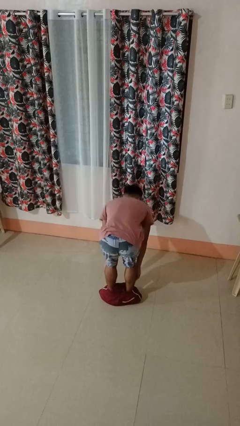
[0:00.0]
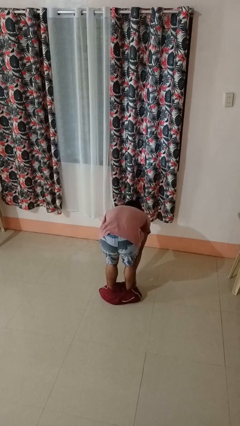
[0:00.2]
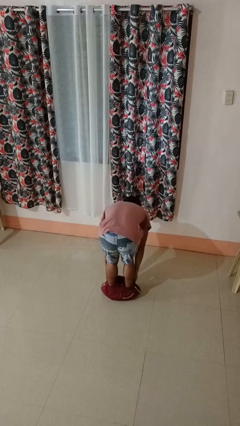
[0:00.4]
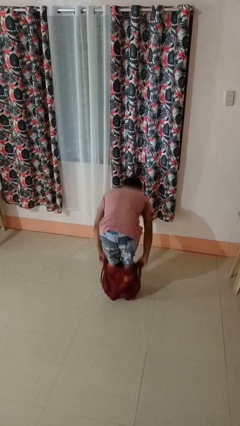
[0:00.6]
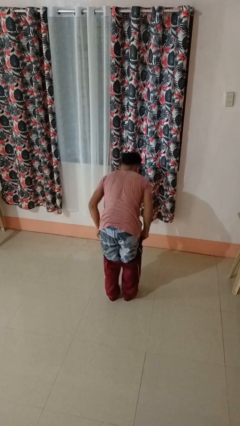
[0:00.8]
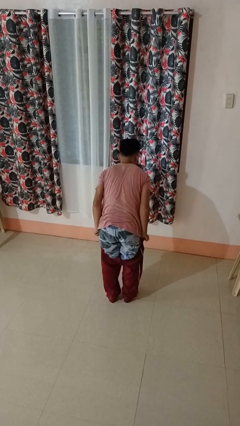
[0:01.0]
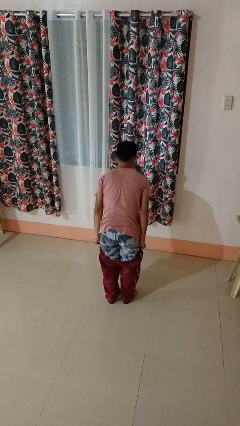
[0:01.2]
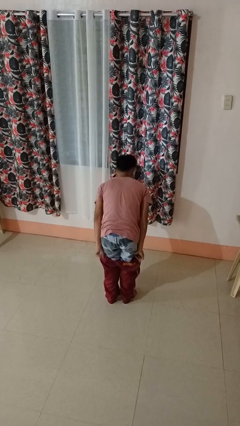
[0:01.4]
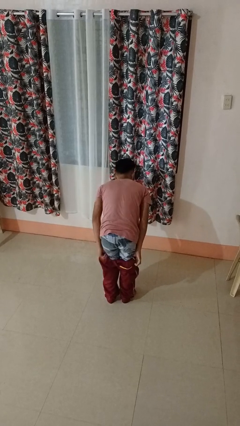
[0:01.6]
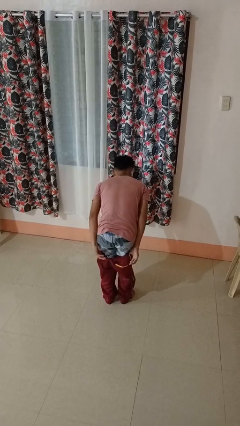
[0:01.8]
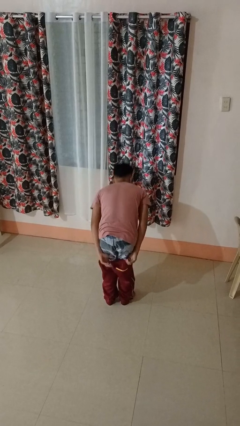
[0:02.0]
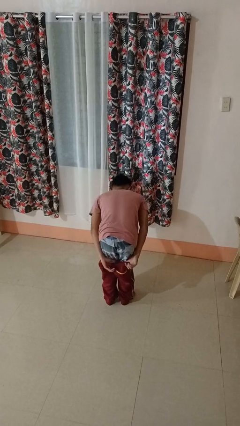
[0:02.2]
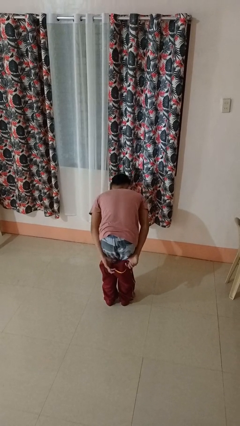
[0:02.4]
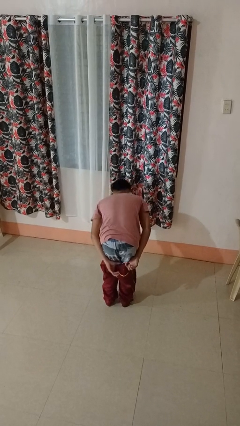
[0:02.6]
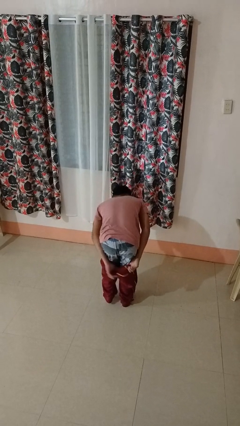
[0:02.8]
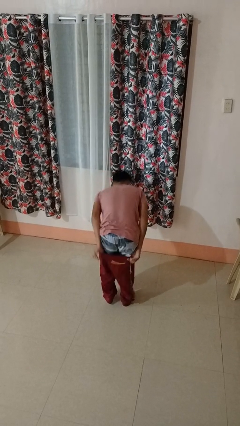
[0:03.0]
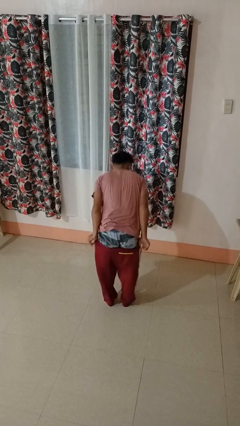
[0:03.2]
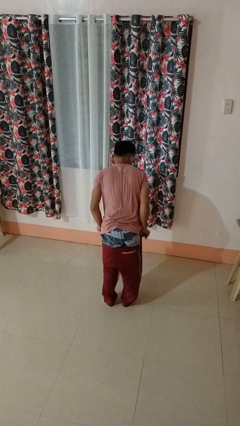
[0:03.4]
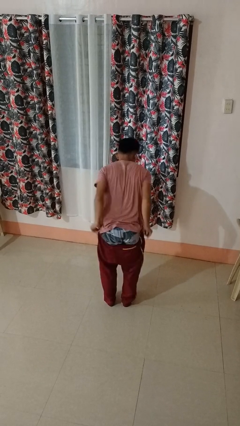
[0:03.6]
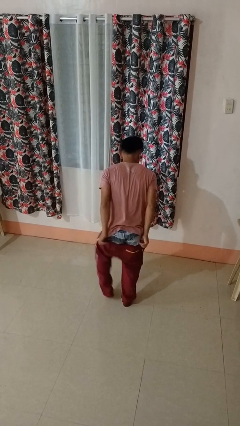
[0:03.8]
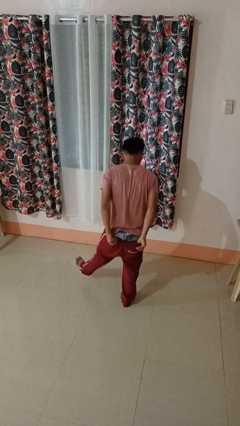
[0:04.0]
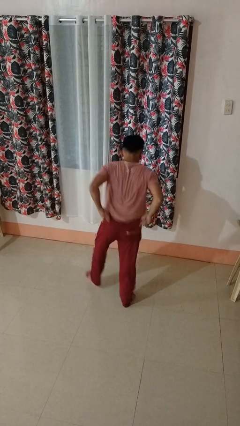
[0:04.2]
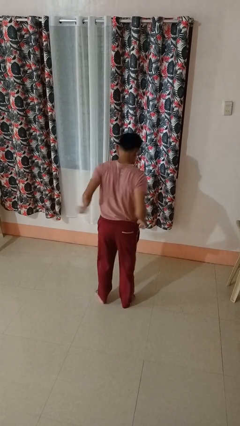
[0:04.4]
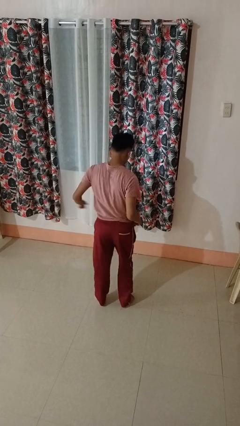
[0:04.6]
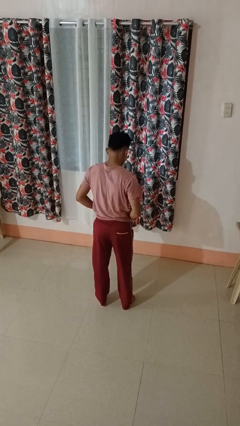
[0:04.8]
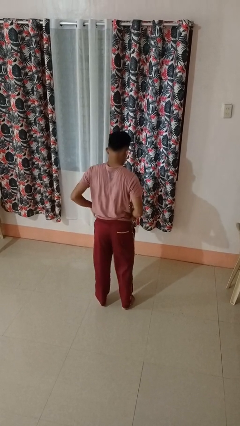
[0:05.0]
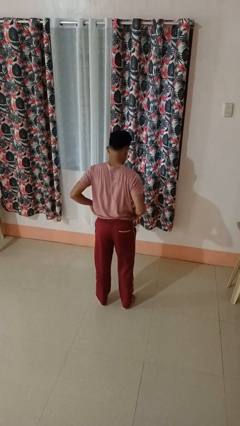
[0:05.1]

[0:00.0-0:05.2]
person puts on pants

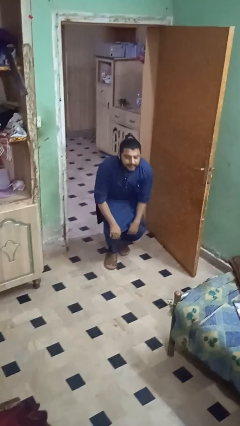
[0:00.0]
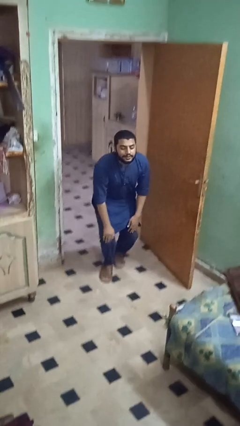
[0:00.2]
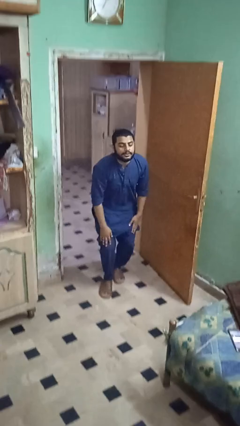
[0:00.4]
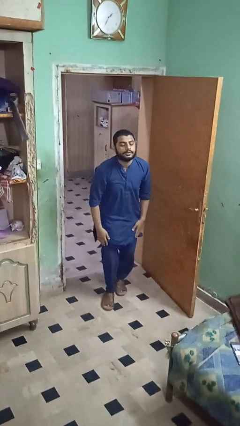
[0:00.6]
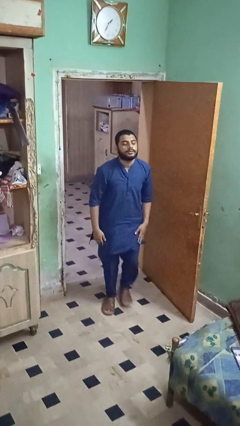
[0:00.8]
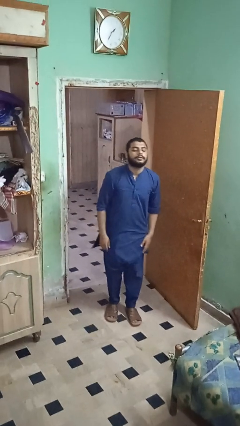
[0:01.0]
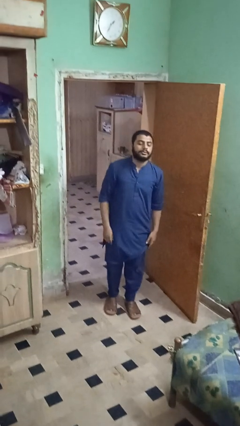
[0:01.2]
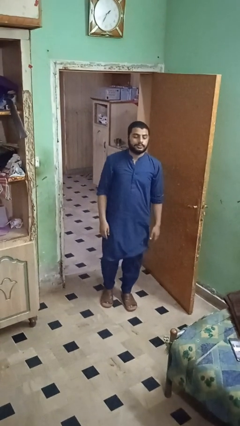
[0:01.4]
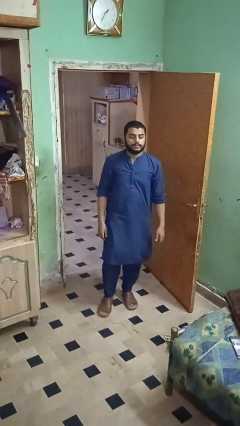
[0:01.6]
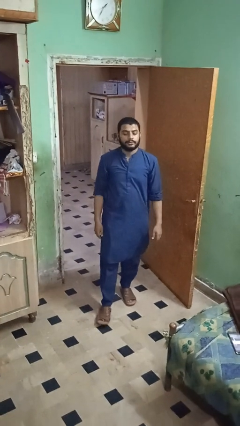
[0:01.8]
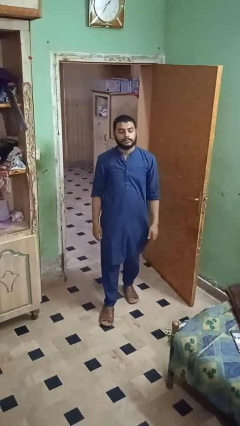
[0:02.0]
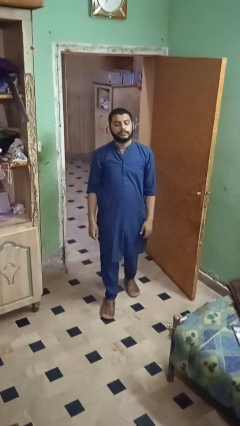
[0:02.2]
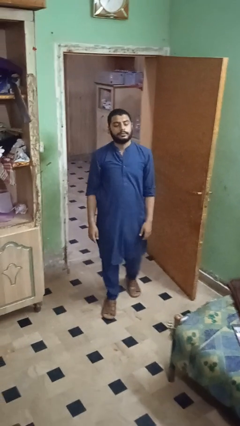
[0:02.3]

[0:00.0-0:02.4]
person stands up from floor

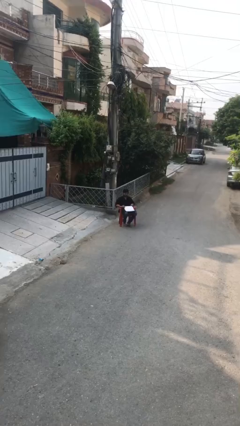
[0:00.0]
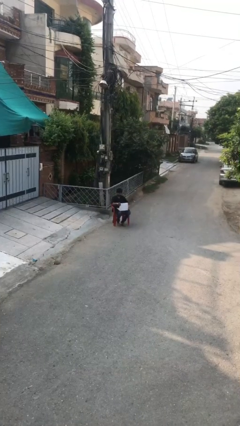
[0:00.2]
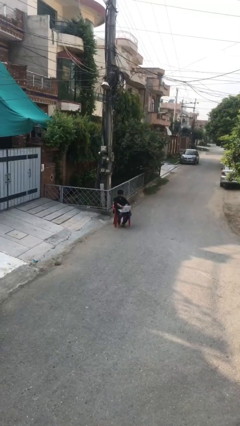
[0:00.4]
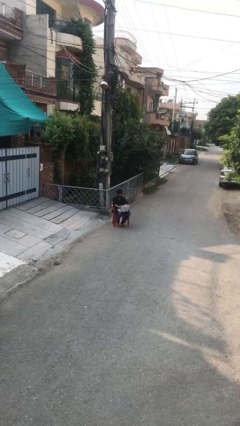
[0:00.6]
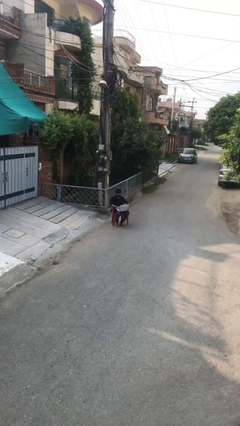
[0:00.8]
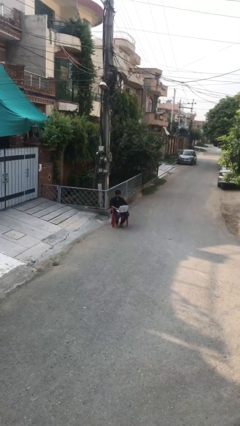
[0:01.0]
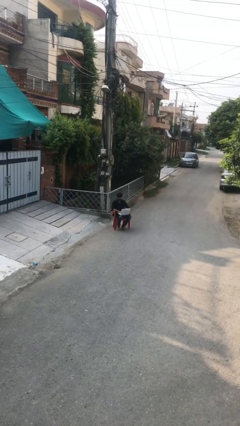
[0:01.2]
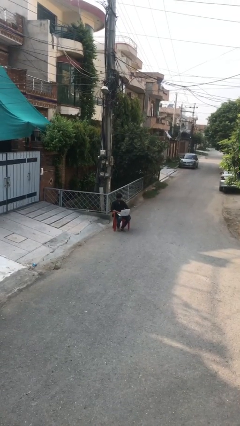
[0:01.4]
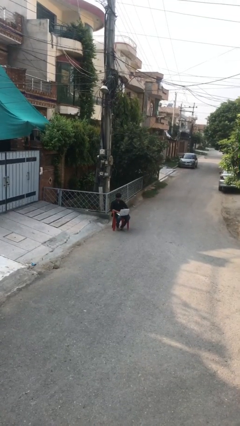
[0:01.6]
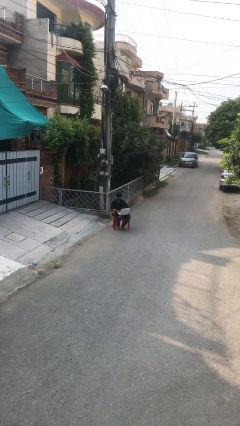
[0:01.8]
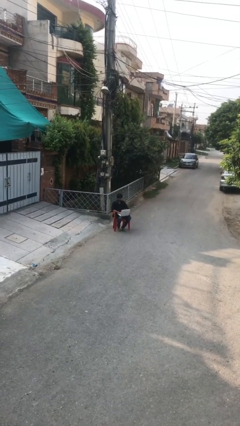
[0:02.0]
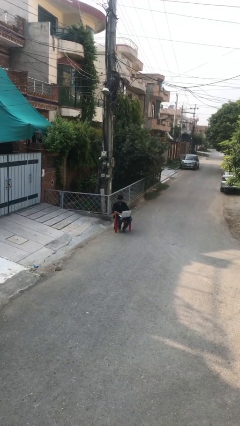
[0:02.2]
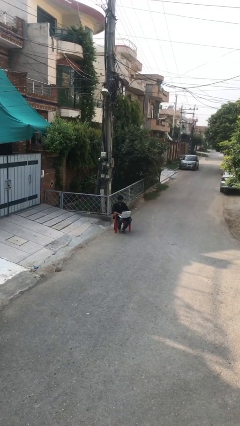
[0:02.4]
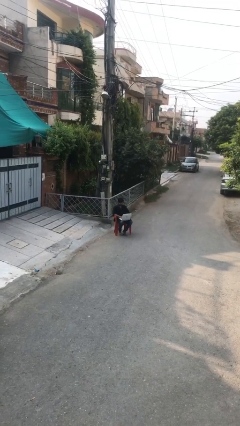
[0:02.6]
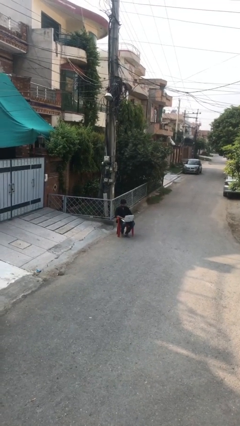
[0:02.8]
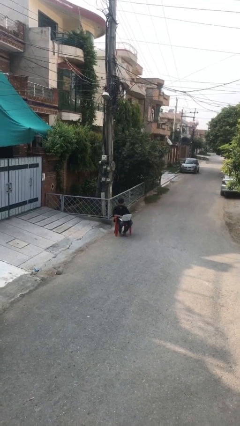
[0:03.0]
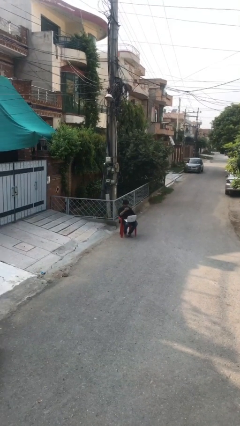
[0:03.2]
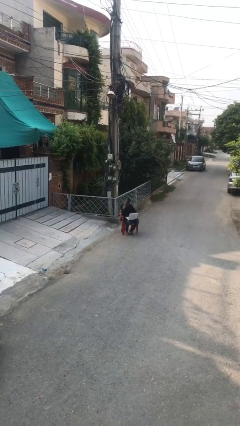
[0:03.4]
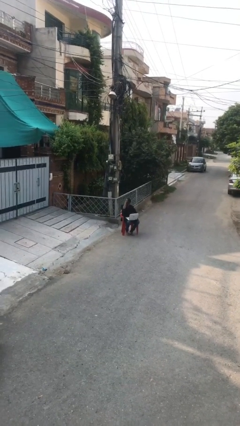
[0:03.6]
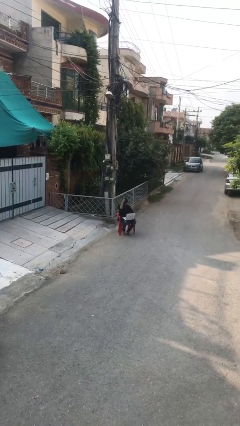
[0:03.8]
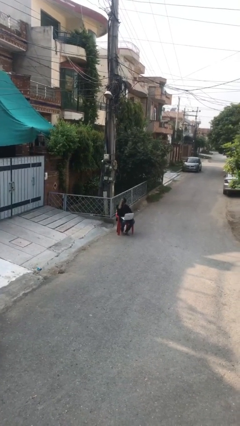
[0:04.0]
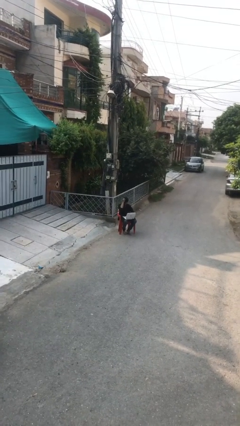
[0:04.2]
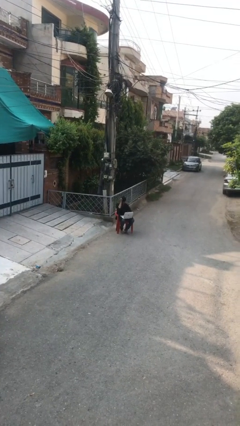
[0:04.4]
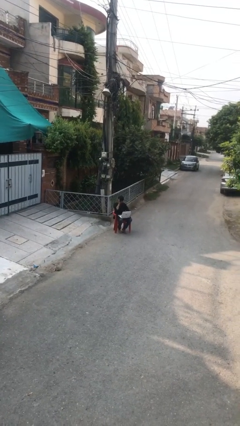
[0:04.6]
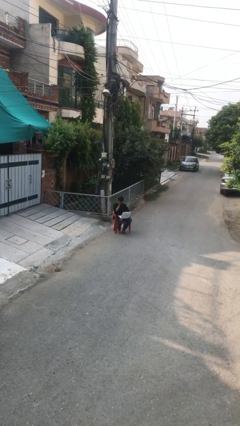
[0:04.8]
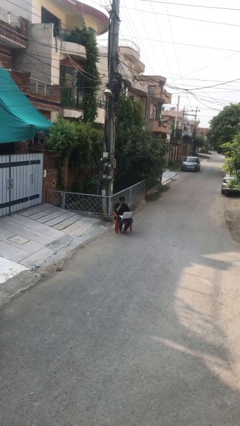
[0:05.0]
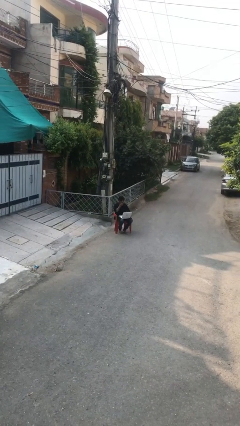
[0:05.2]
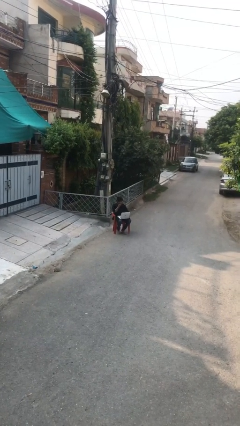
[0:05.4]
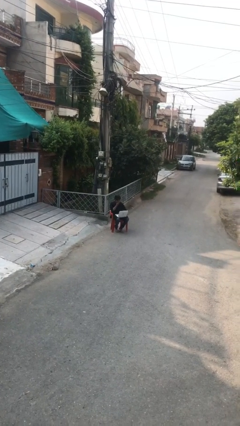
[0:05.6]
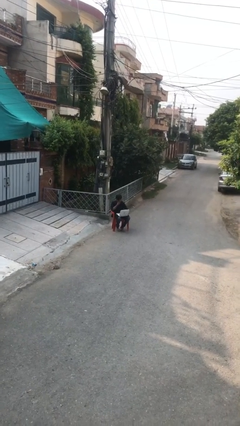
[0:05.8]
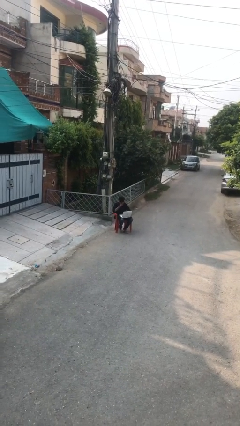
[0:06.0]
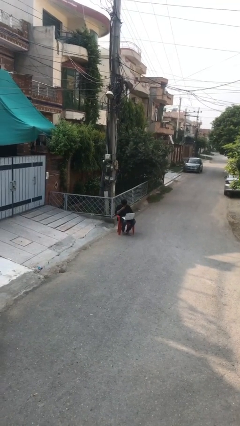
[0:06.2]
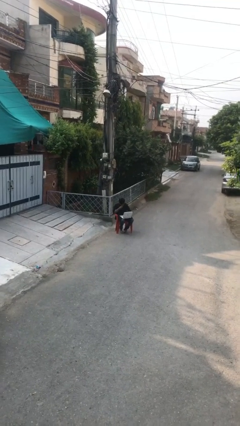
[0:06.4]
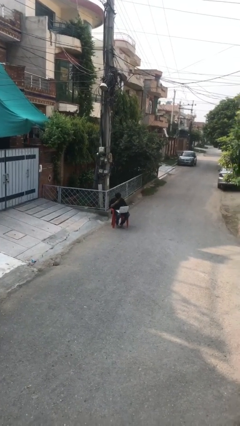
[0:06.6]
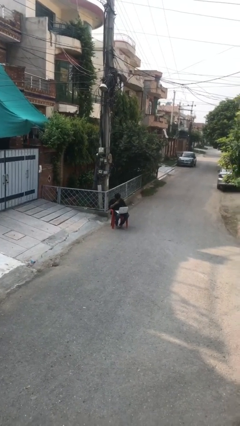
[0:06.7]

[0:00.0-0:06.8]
person interacts with laptop

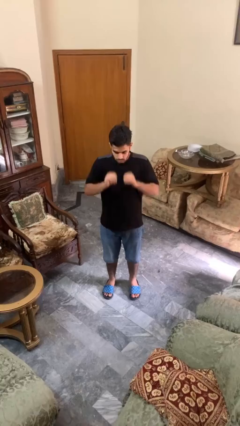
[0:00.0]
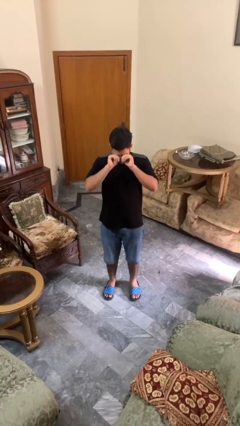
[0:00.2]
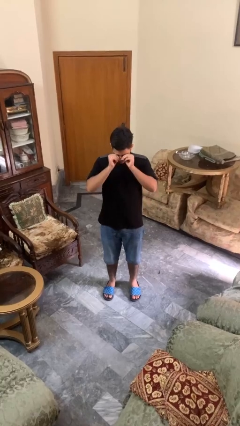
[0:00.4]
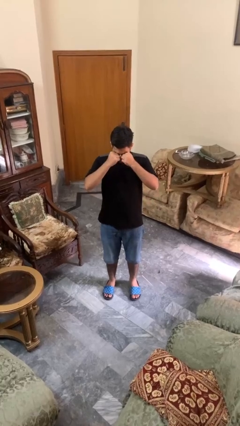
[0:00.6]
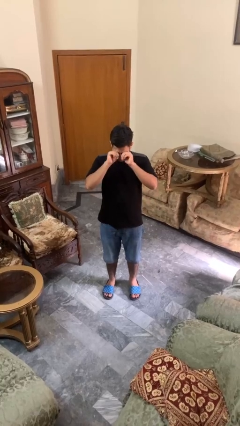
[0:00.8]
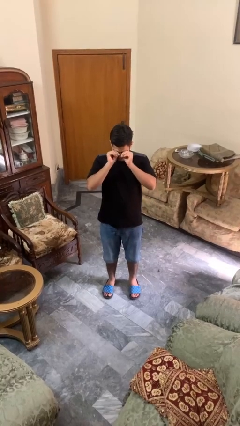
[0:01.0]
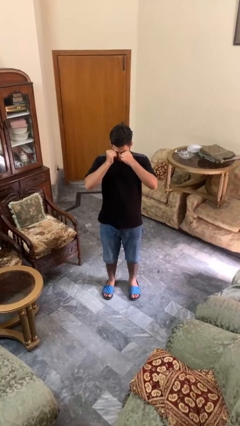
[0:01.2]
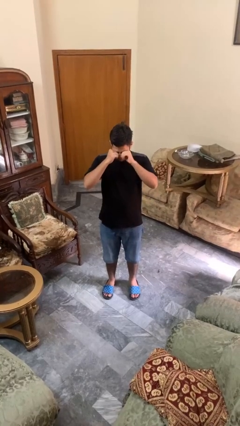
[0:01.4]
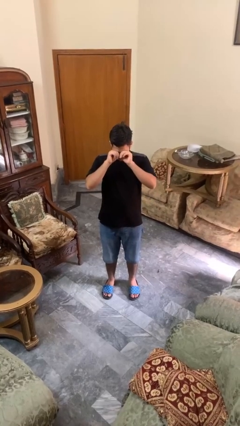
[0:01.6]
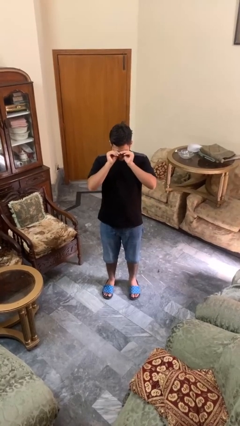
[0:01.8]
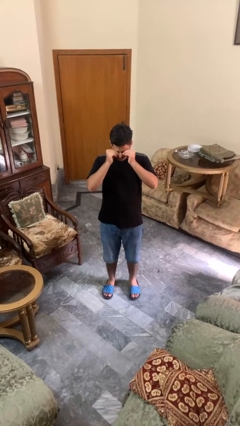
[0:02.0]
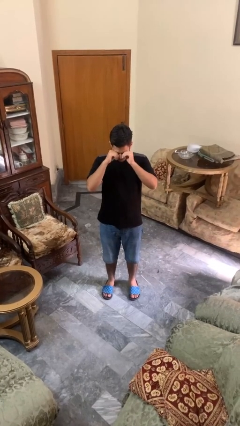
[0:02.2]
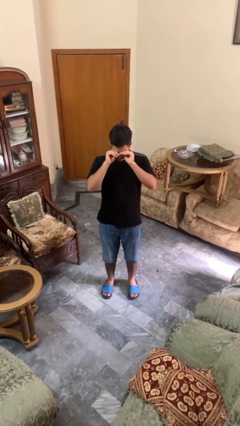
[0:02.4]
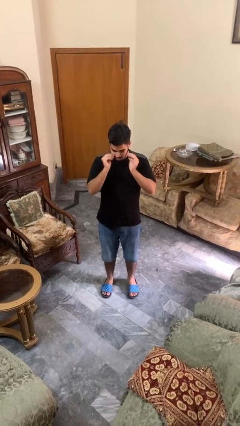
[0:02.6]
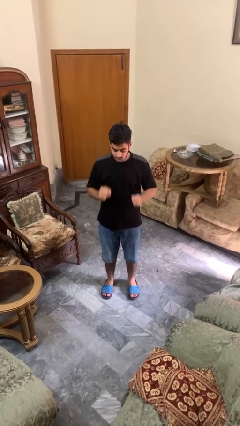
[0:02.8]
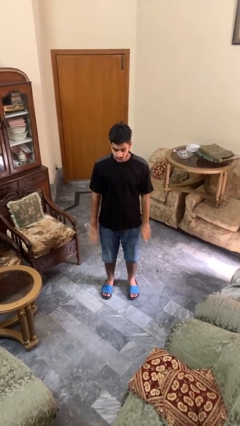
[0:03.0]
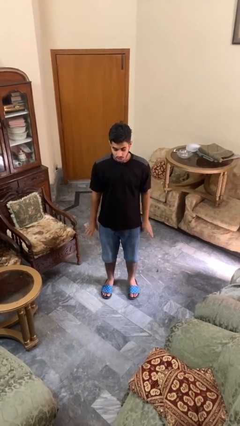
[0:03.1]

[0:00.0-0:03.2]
person rubs eyes

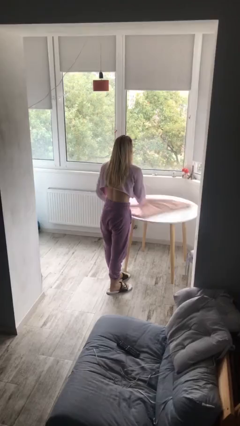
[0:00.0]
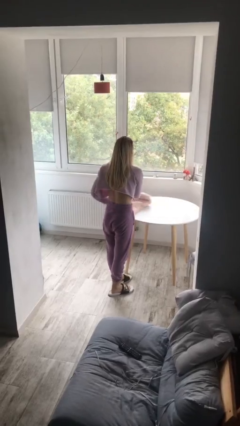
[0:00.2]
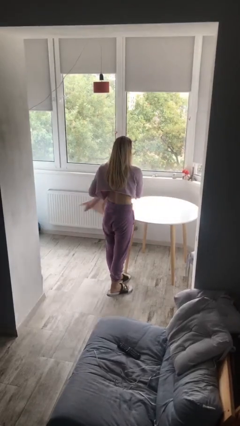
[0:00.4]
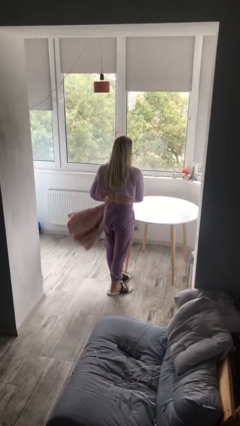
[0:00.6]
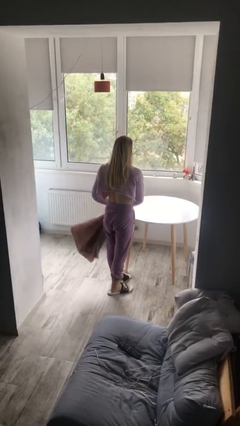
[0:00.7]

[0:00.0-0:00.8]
person folds tablecloth
